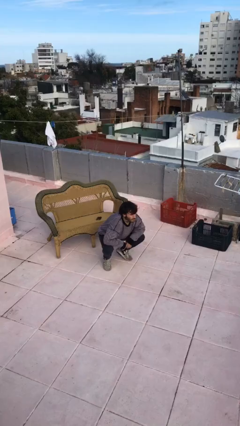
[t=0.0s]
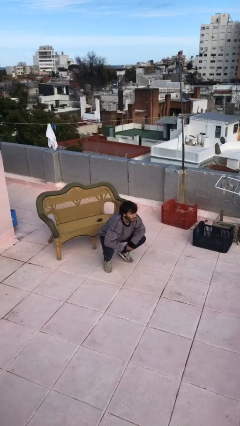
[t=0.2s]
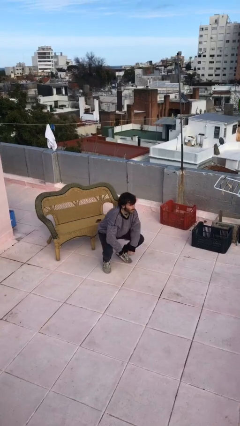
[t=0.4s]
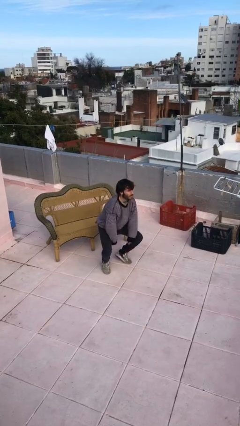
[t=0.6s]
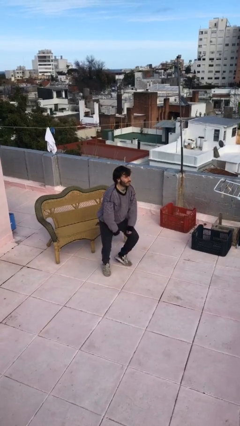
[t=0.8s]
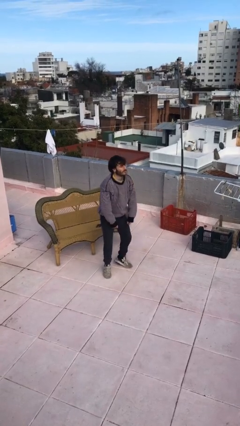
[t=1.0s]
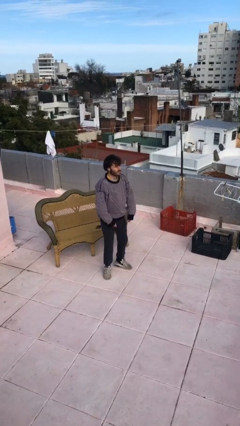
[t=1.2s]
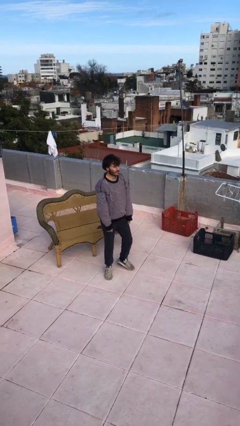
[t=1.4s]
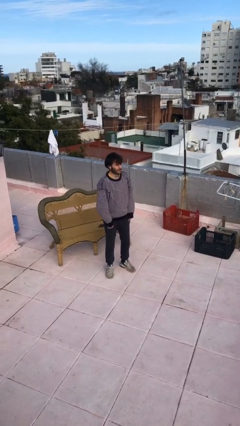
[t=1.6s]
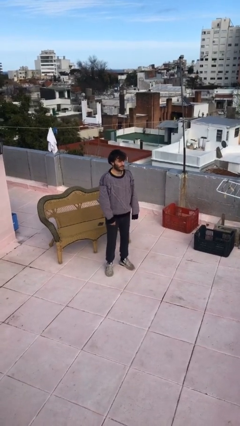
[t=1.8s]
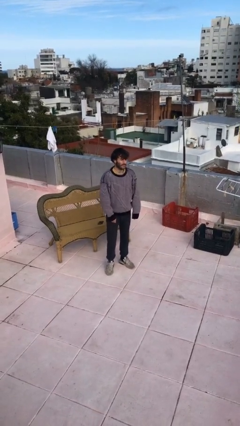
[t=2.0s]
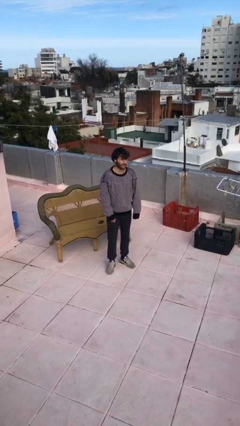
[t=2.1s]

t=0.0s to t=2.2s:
person stands up

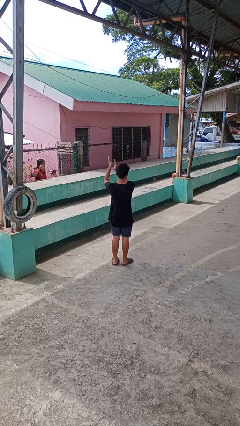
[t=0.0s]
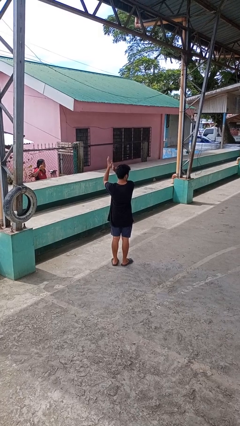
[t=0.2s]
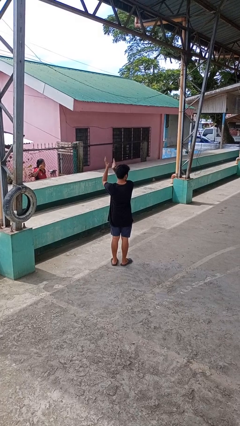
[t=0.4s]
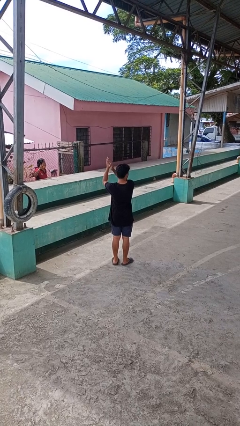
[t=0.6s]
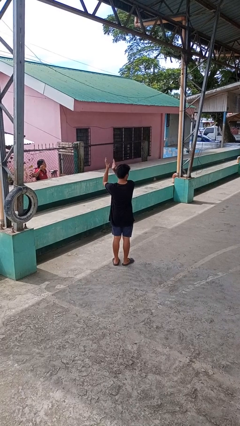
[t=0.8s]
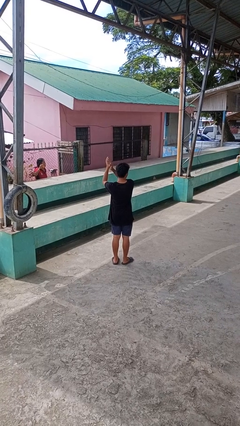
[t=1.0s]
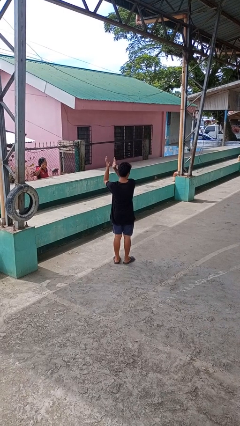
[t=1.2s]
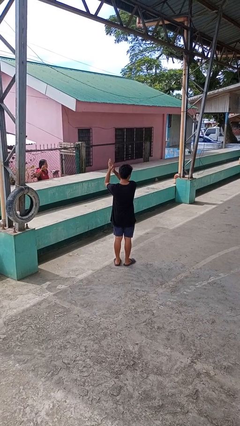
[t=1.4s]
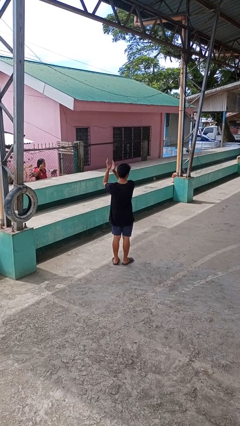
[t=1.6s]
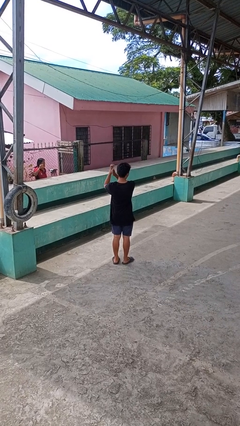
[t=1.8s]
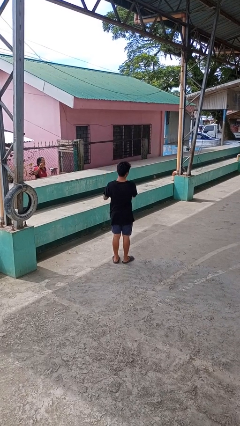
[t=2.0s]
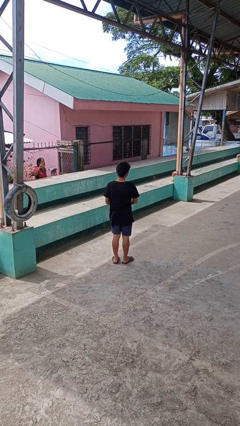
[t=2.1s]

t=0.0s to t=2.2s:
person claps hands

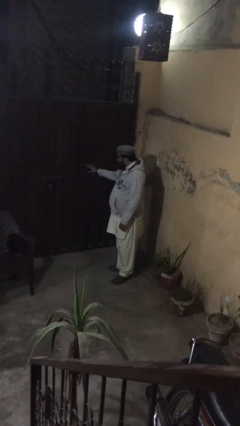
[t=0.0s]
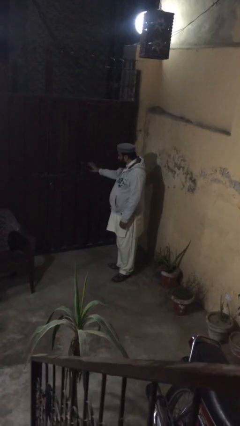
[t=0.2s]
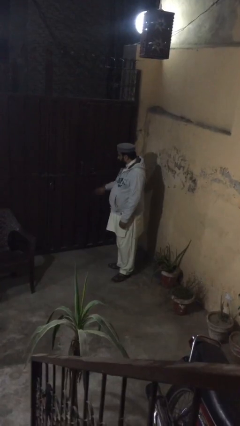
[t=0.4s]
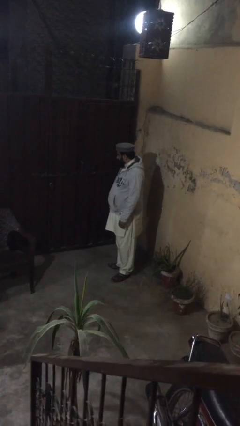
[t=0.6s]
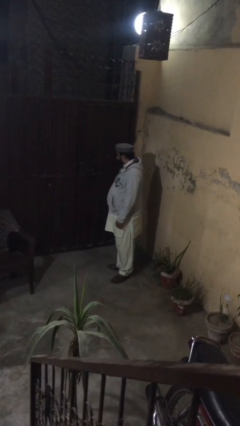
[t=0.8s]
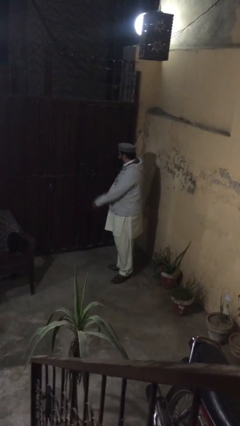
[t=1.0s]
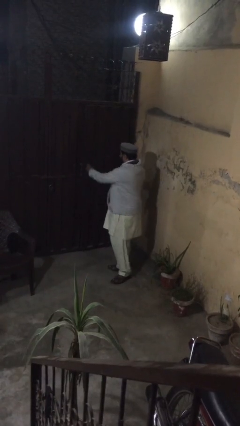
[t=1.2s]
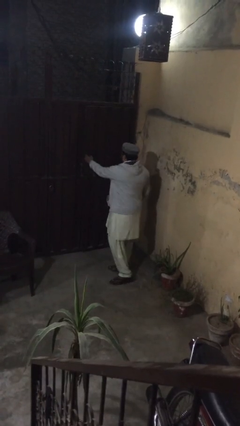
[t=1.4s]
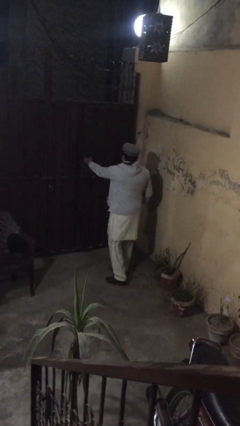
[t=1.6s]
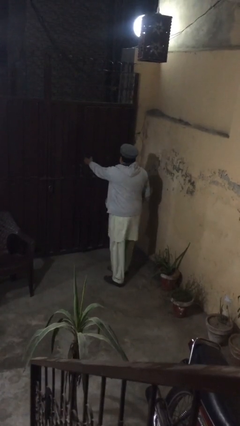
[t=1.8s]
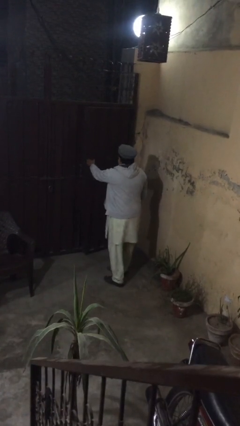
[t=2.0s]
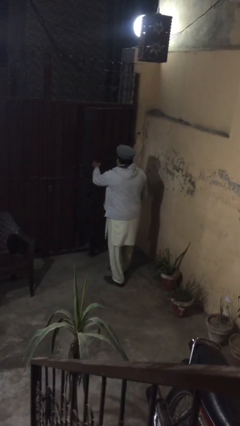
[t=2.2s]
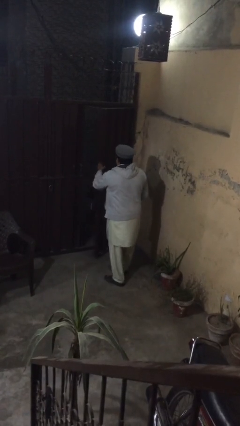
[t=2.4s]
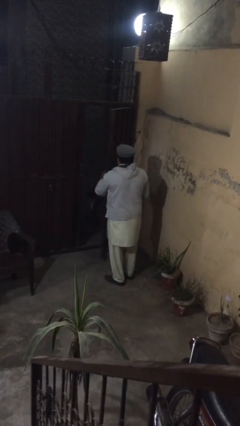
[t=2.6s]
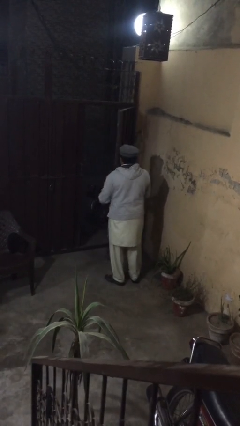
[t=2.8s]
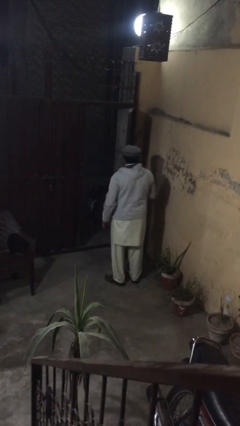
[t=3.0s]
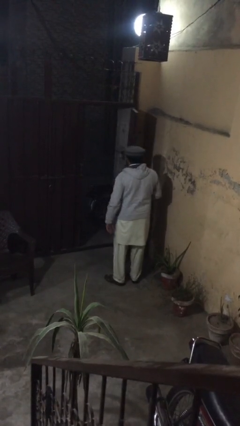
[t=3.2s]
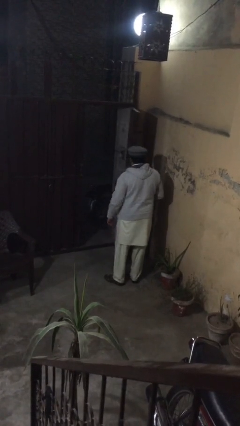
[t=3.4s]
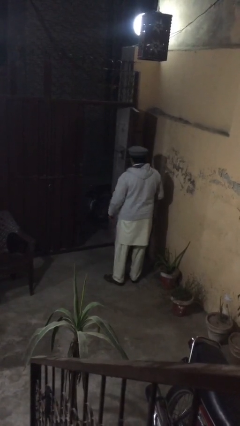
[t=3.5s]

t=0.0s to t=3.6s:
person opens facility door

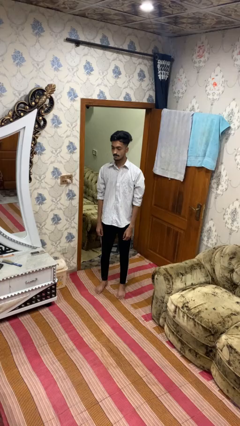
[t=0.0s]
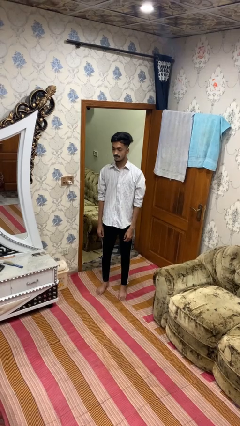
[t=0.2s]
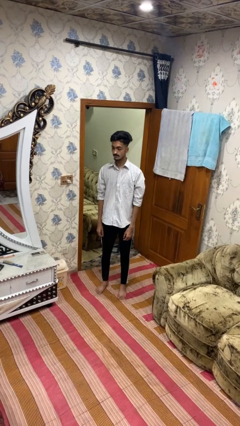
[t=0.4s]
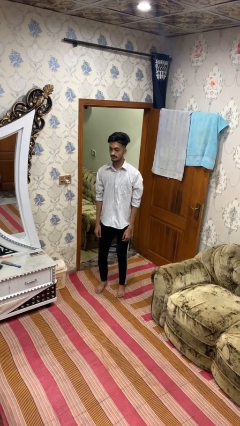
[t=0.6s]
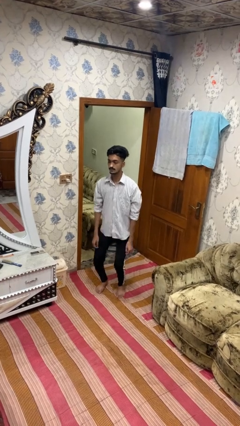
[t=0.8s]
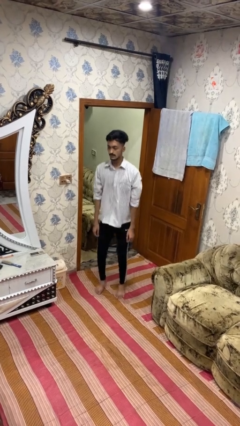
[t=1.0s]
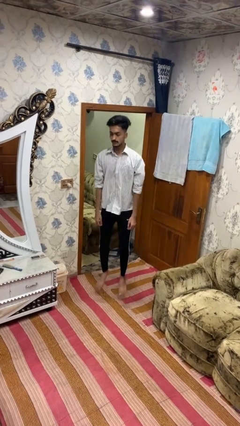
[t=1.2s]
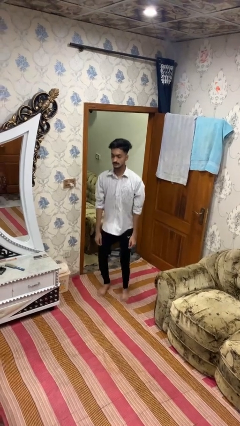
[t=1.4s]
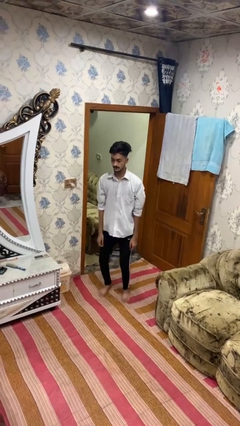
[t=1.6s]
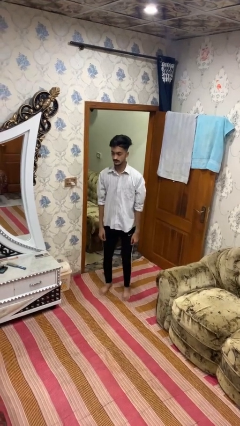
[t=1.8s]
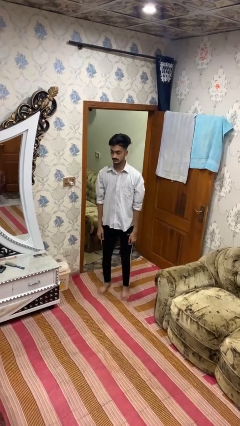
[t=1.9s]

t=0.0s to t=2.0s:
person jumps

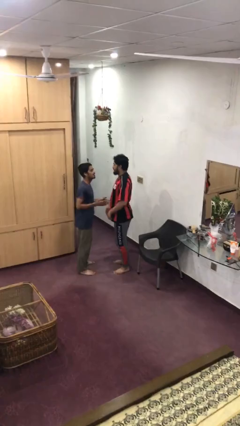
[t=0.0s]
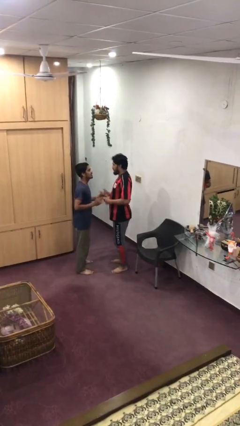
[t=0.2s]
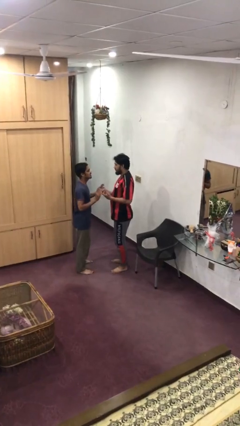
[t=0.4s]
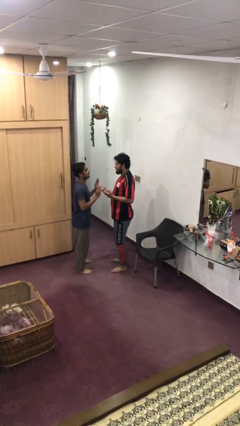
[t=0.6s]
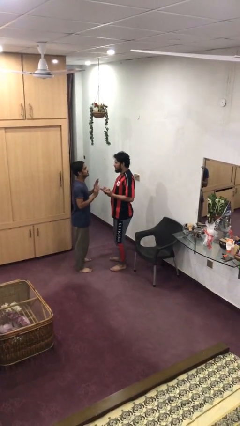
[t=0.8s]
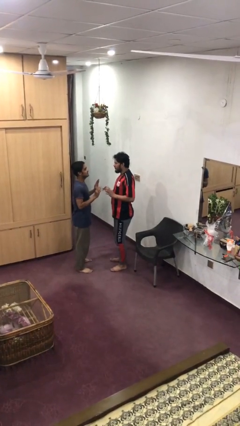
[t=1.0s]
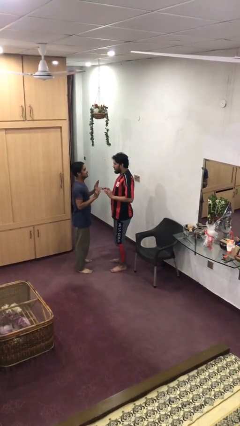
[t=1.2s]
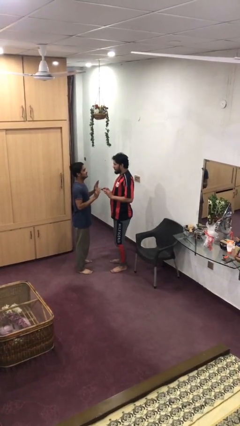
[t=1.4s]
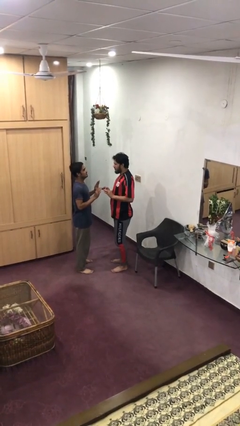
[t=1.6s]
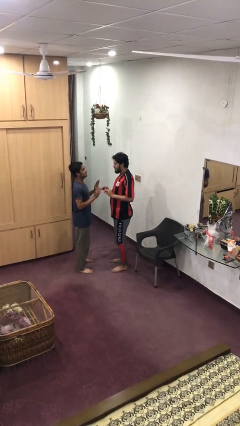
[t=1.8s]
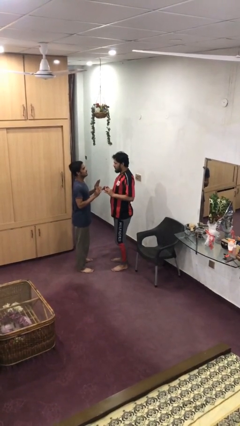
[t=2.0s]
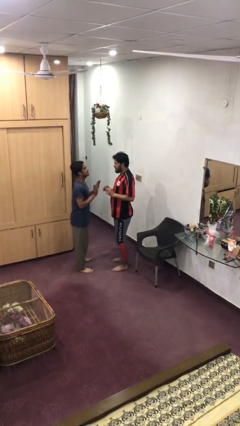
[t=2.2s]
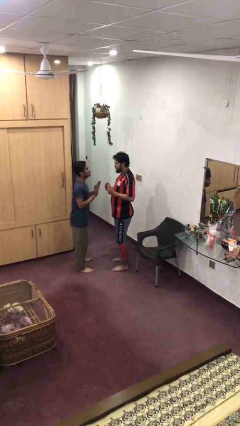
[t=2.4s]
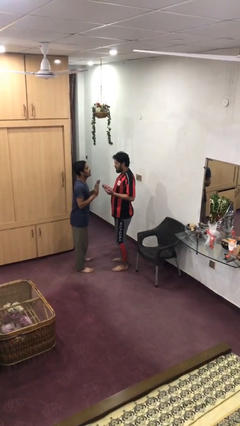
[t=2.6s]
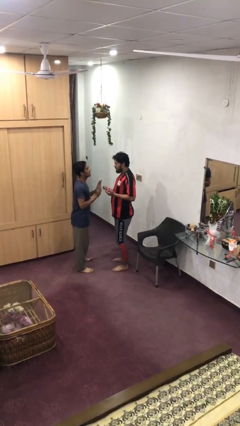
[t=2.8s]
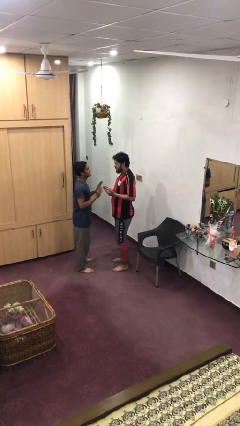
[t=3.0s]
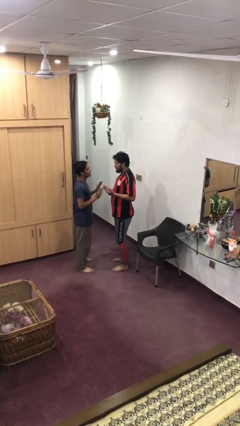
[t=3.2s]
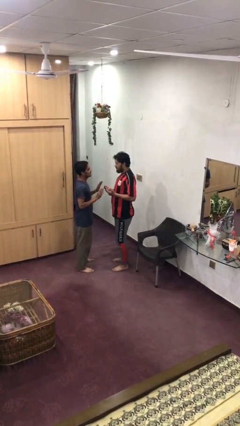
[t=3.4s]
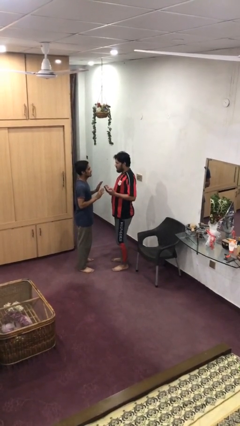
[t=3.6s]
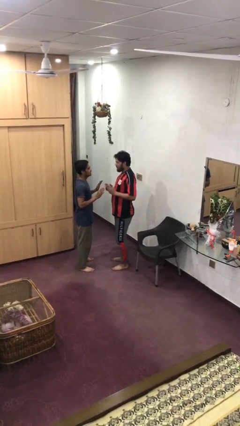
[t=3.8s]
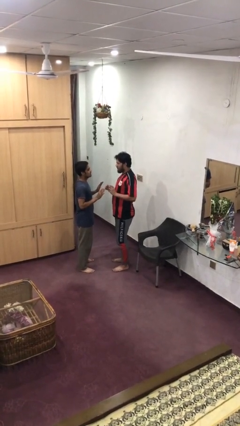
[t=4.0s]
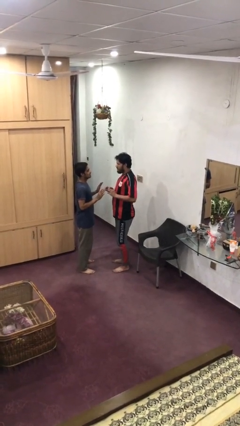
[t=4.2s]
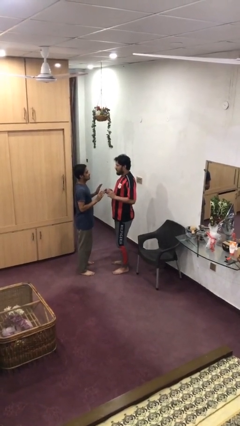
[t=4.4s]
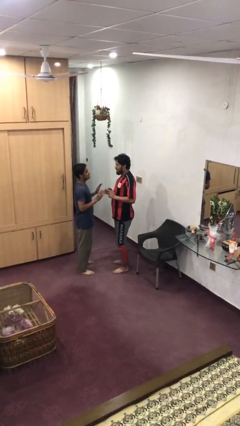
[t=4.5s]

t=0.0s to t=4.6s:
person talks to person

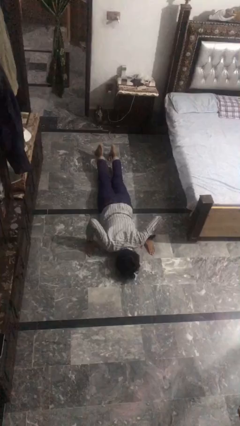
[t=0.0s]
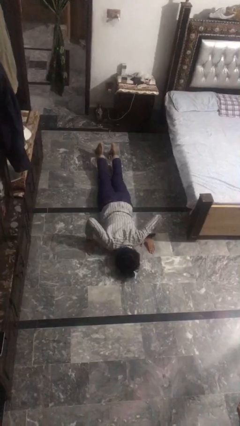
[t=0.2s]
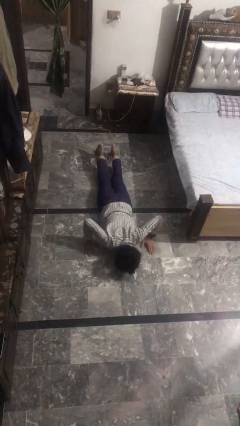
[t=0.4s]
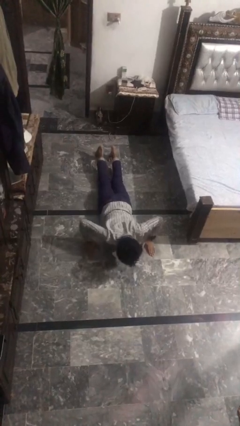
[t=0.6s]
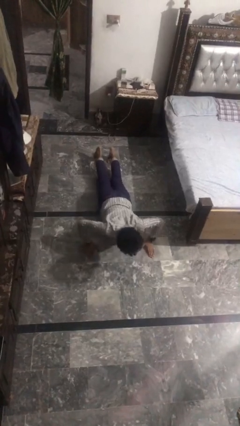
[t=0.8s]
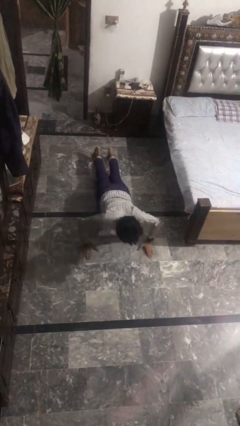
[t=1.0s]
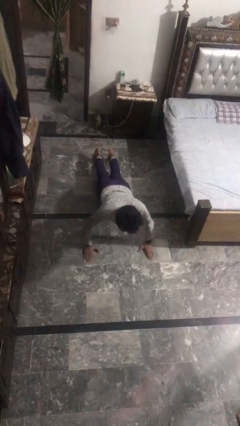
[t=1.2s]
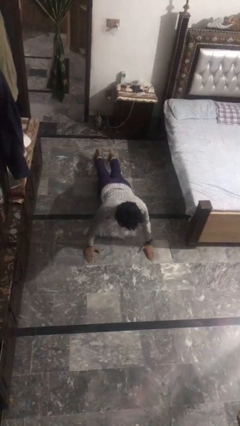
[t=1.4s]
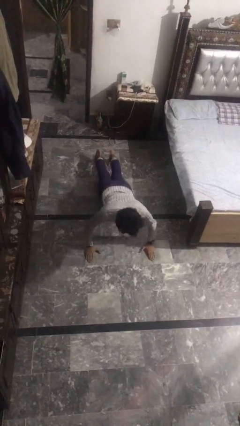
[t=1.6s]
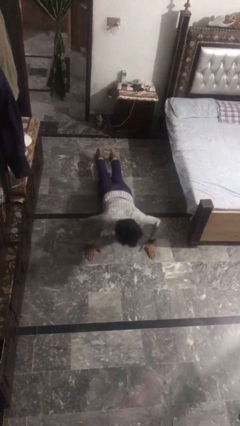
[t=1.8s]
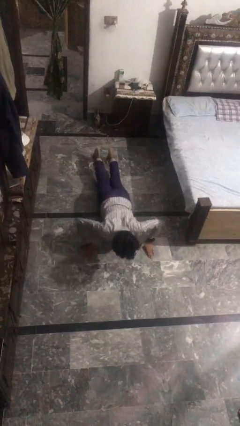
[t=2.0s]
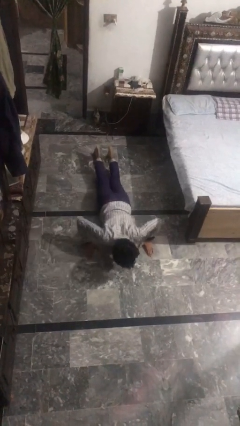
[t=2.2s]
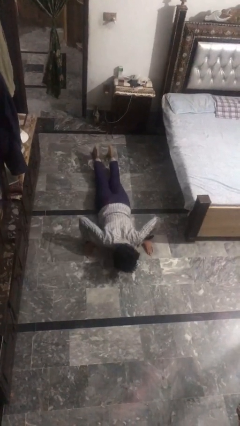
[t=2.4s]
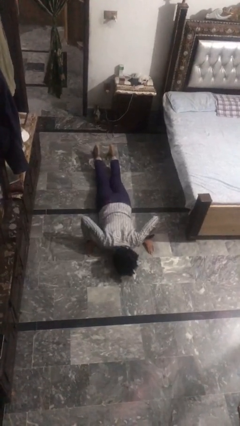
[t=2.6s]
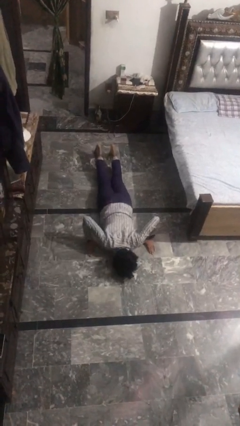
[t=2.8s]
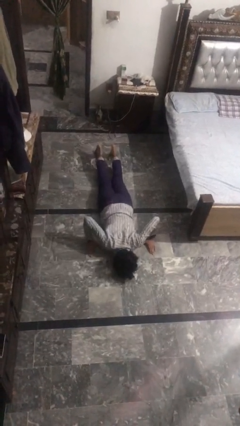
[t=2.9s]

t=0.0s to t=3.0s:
person exercises with pushup
